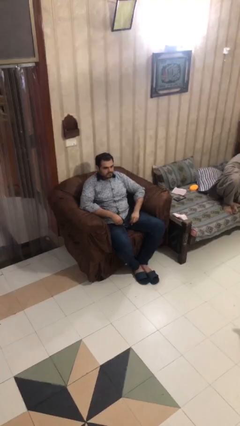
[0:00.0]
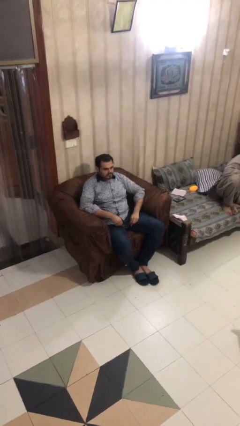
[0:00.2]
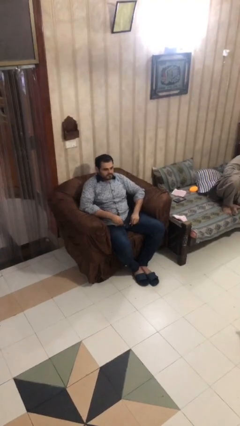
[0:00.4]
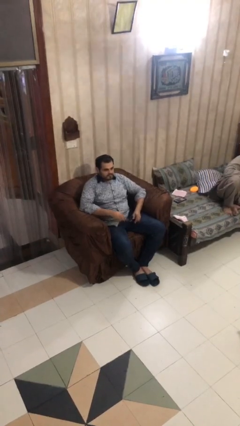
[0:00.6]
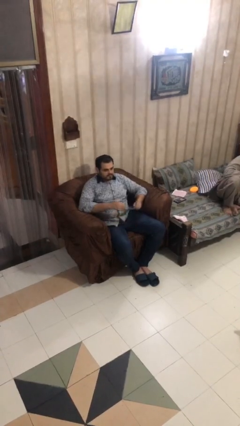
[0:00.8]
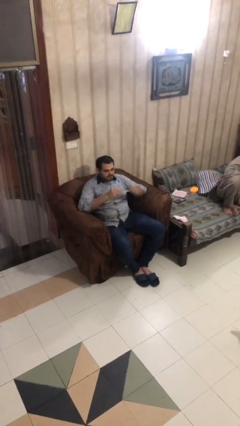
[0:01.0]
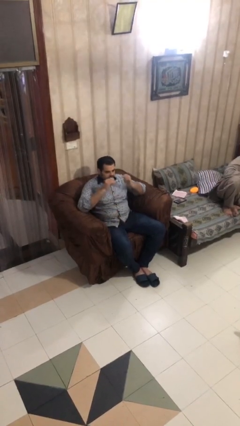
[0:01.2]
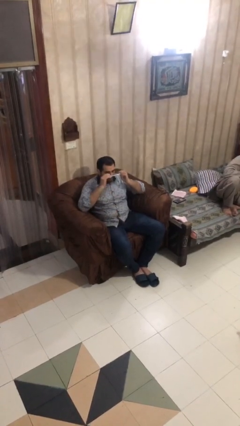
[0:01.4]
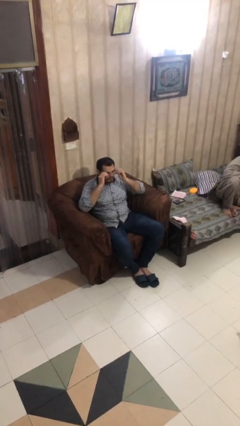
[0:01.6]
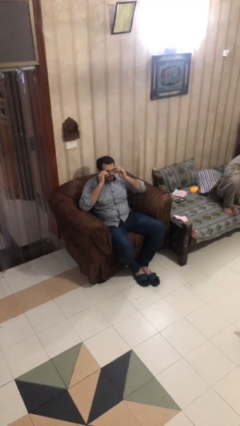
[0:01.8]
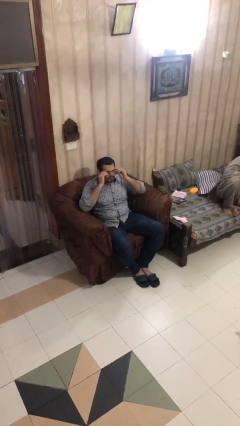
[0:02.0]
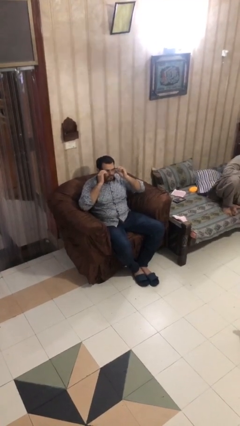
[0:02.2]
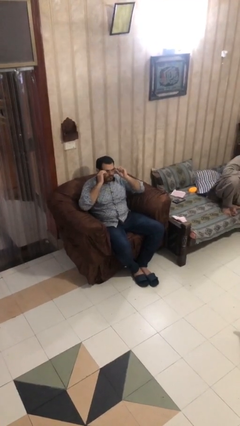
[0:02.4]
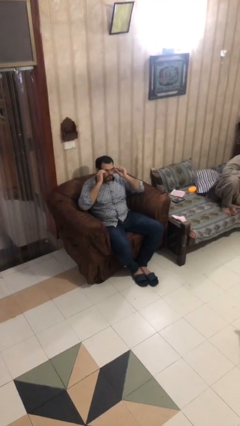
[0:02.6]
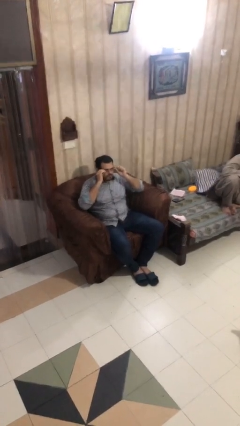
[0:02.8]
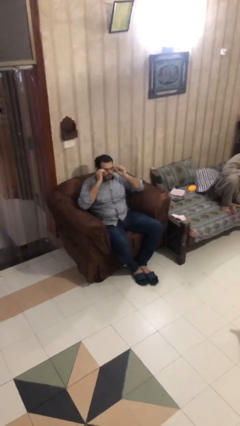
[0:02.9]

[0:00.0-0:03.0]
person puts on glasses

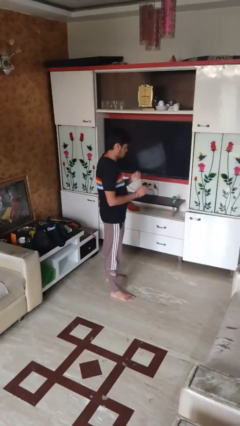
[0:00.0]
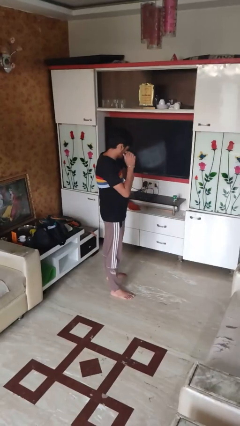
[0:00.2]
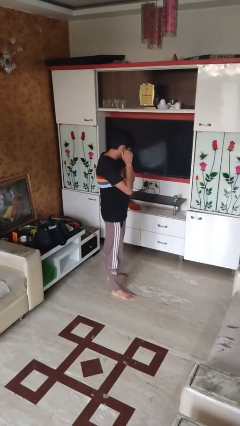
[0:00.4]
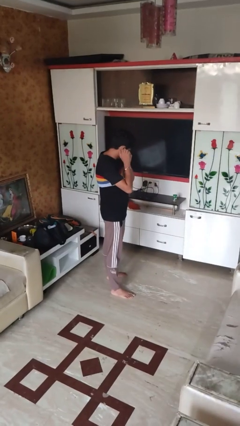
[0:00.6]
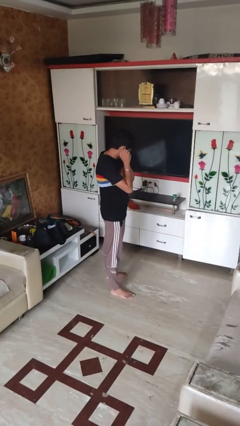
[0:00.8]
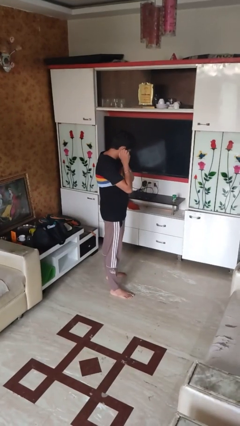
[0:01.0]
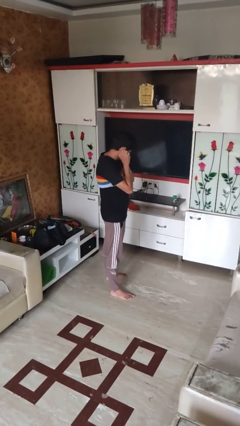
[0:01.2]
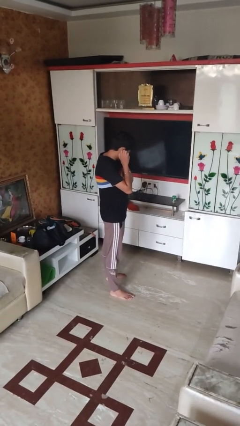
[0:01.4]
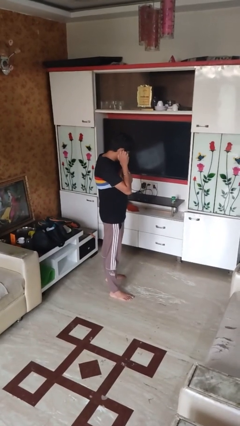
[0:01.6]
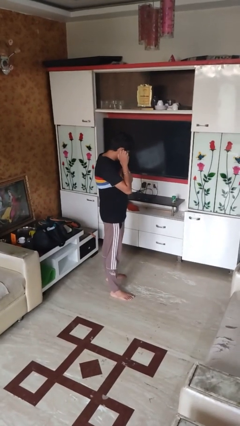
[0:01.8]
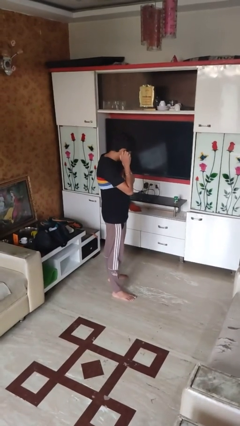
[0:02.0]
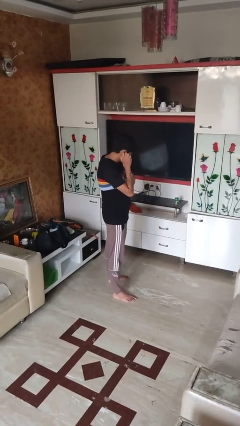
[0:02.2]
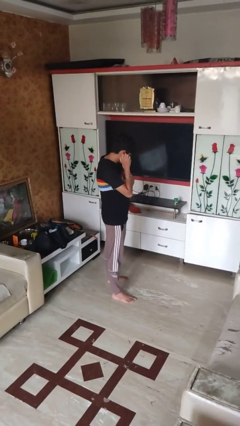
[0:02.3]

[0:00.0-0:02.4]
person puts on earrings

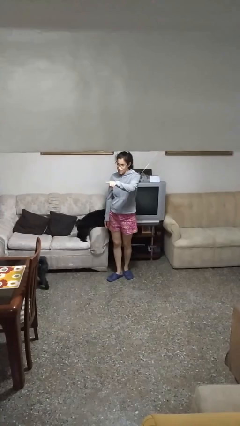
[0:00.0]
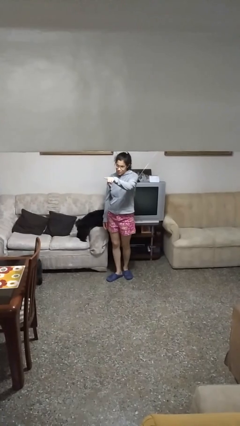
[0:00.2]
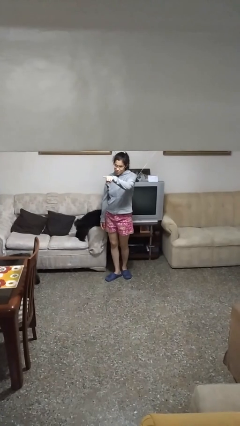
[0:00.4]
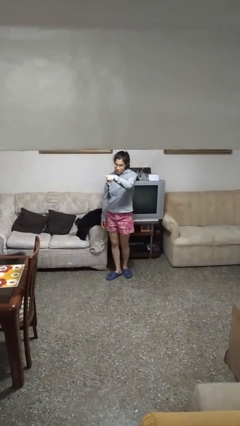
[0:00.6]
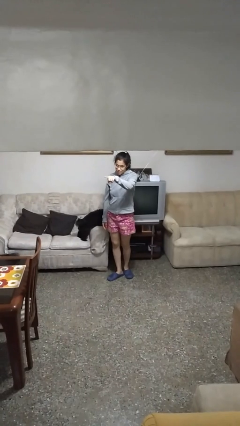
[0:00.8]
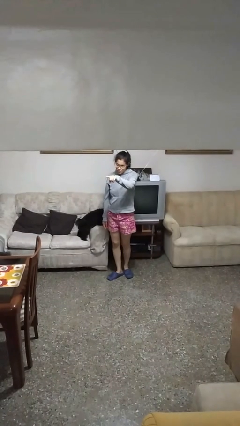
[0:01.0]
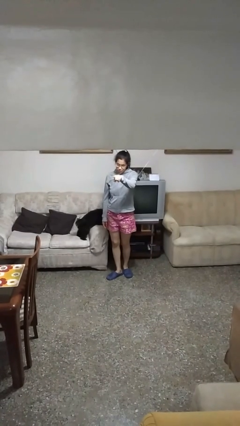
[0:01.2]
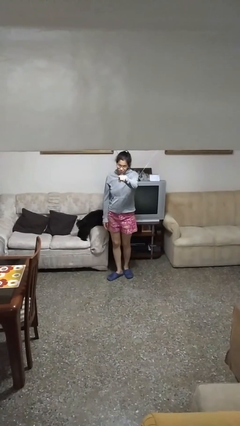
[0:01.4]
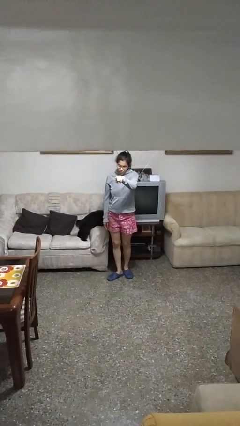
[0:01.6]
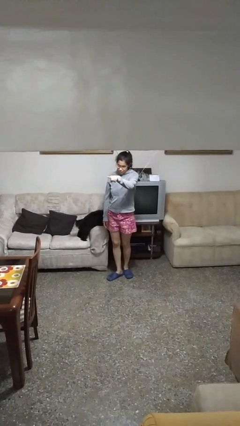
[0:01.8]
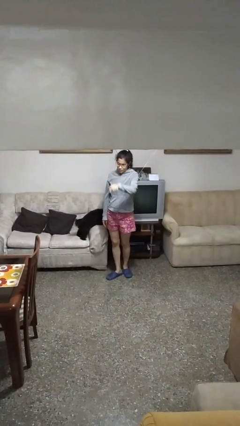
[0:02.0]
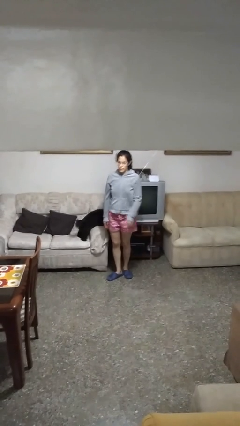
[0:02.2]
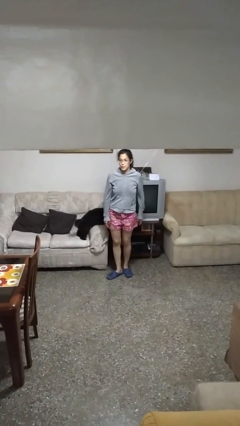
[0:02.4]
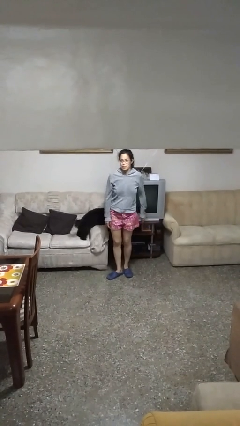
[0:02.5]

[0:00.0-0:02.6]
person points at person

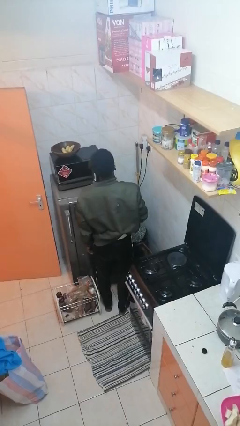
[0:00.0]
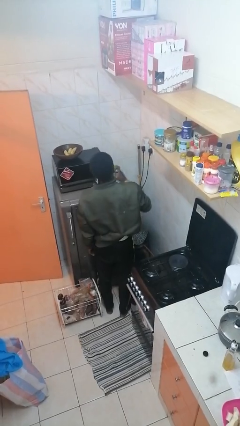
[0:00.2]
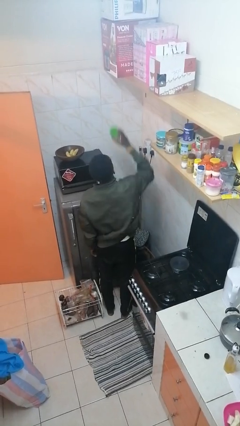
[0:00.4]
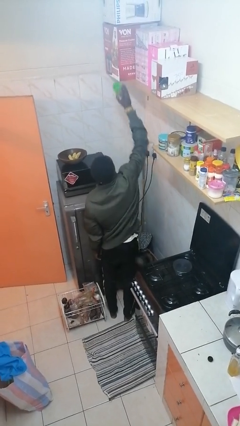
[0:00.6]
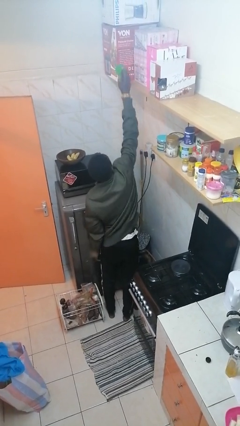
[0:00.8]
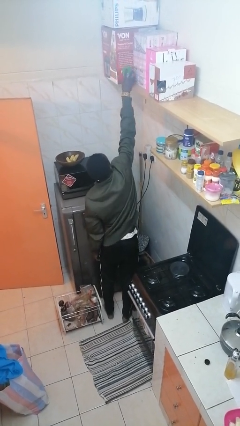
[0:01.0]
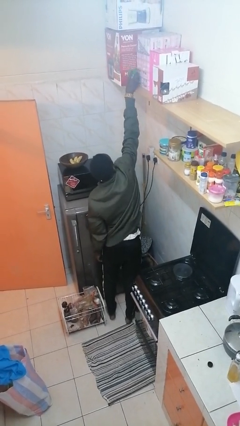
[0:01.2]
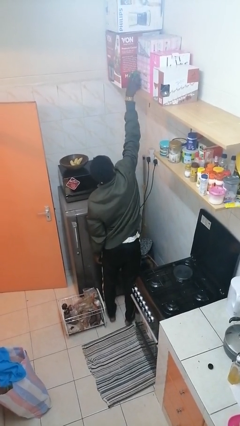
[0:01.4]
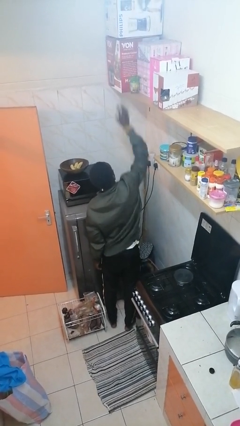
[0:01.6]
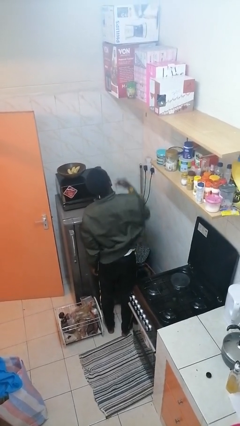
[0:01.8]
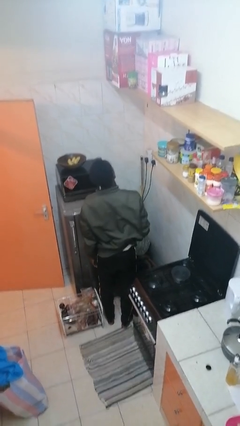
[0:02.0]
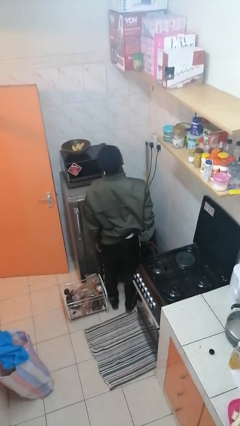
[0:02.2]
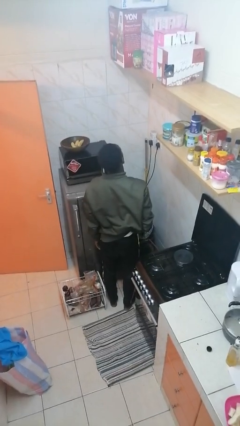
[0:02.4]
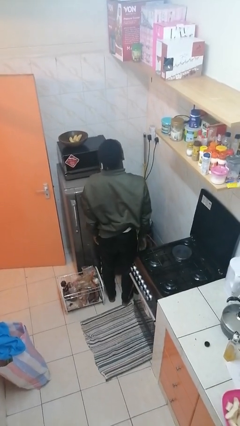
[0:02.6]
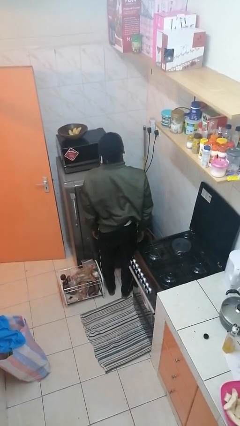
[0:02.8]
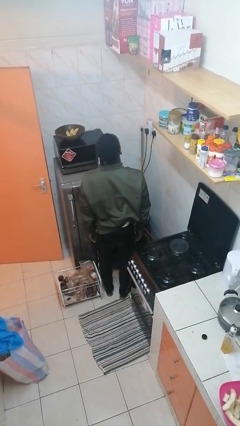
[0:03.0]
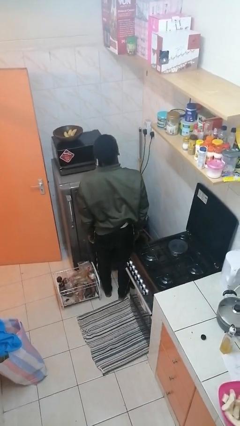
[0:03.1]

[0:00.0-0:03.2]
person puts down object on shelf

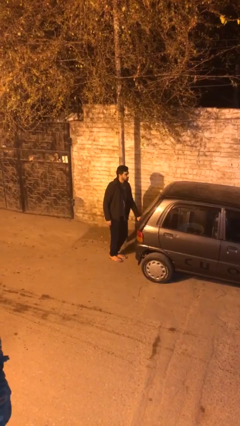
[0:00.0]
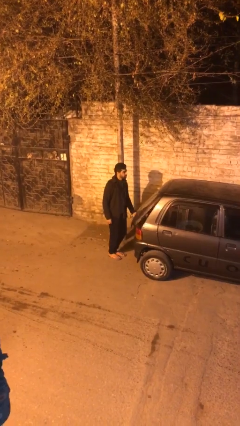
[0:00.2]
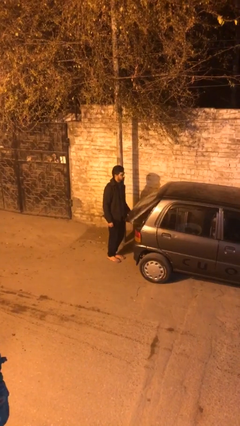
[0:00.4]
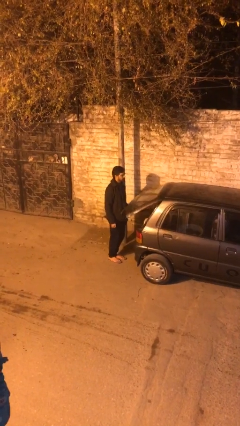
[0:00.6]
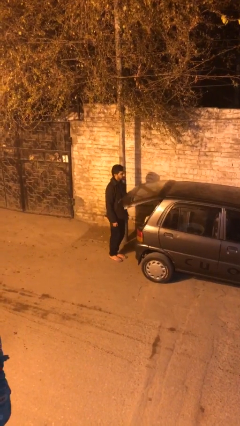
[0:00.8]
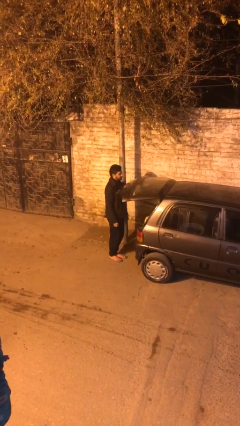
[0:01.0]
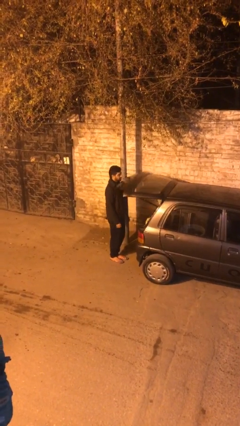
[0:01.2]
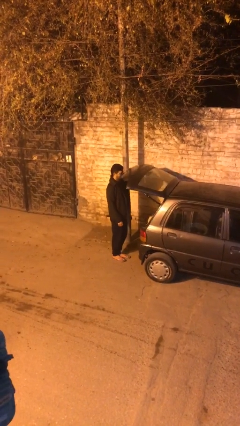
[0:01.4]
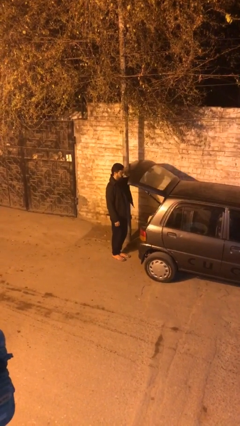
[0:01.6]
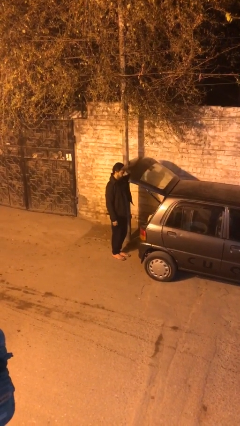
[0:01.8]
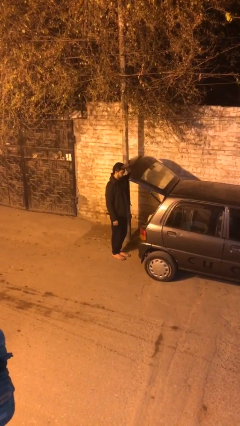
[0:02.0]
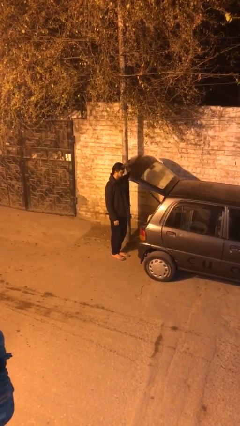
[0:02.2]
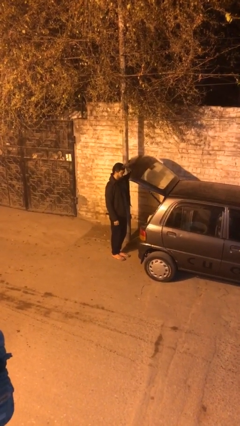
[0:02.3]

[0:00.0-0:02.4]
person opens car trunk

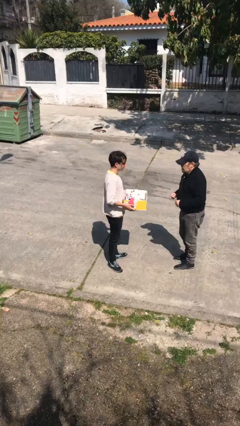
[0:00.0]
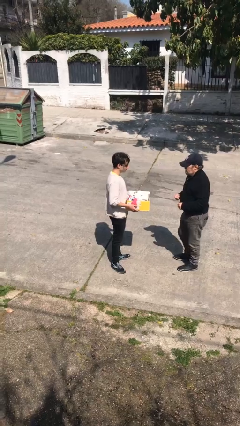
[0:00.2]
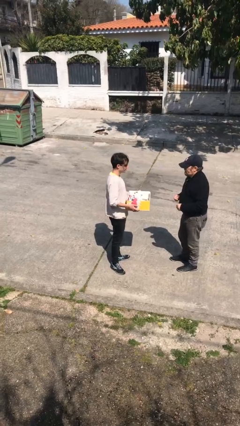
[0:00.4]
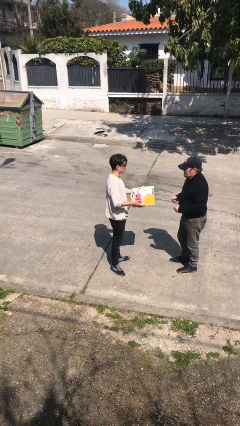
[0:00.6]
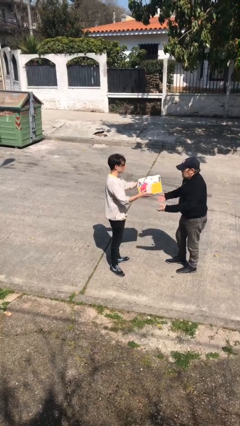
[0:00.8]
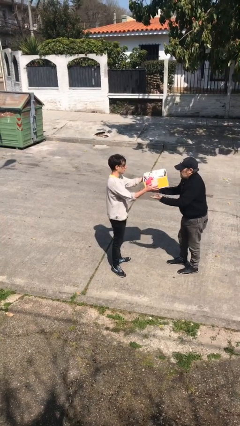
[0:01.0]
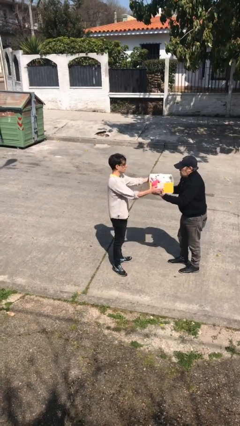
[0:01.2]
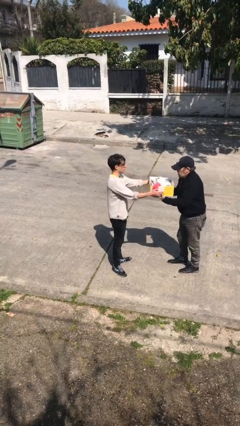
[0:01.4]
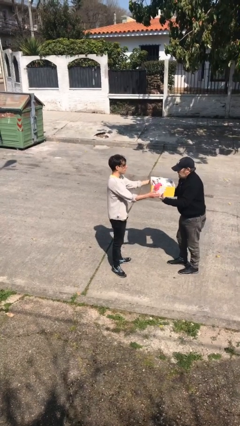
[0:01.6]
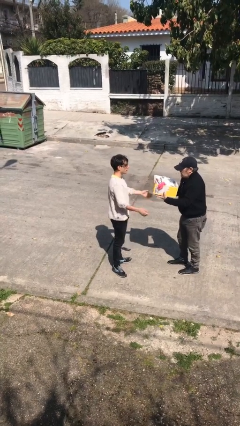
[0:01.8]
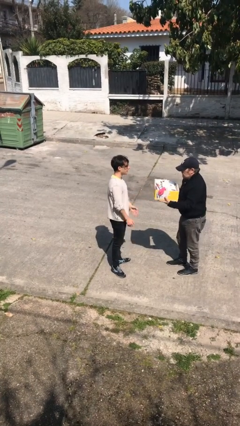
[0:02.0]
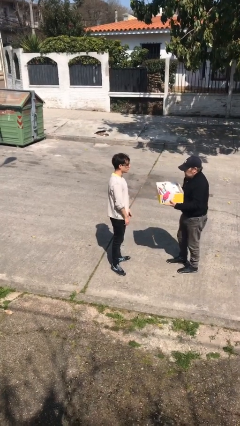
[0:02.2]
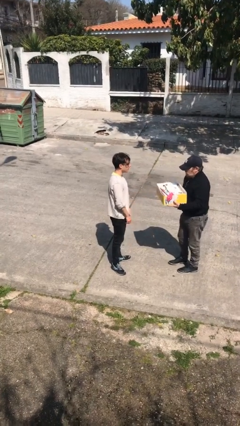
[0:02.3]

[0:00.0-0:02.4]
person transfers object to person

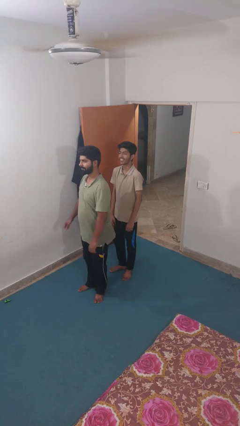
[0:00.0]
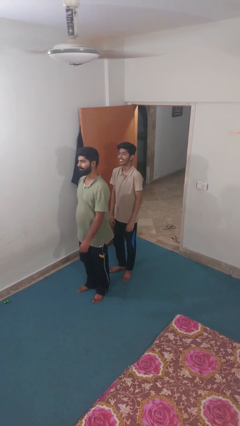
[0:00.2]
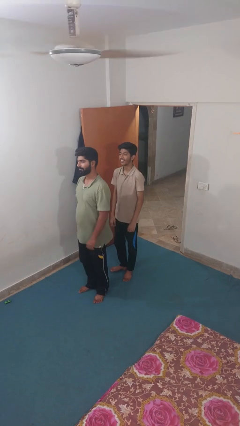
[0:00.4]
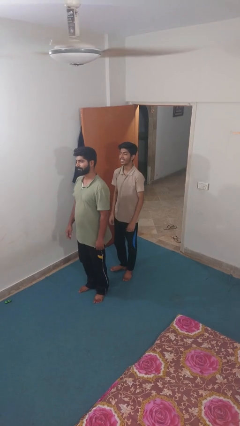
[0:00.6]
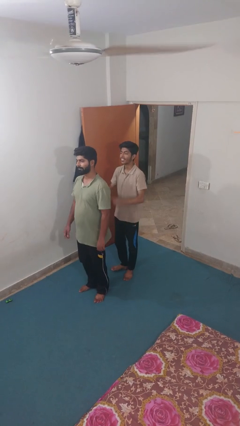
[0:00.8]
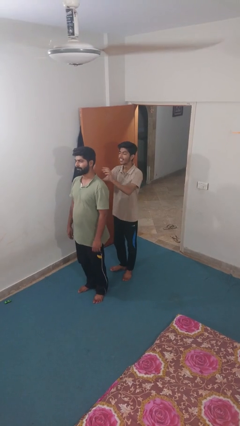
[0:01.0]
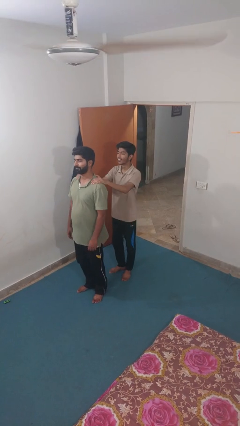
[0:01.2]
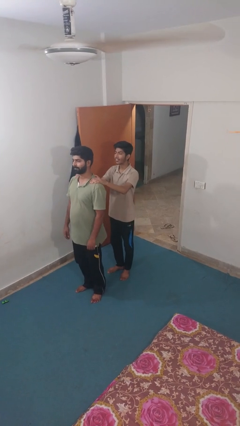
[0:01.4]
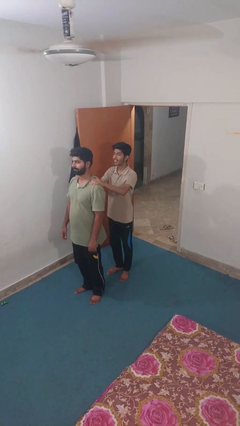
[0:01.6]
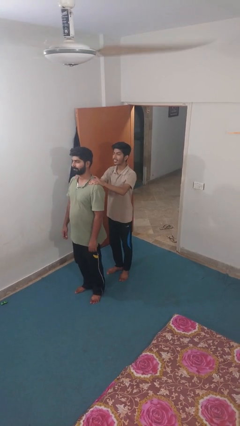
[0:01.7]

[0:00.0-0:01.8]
person grabs person by shoulder
